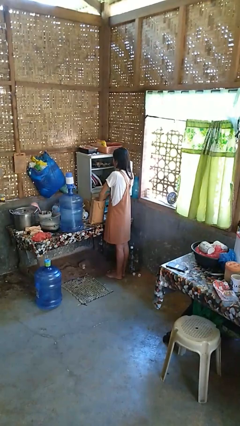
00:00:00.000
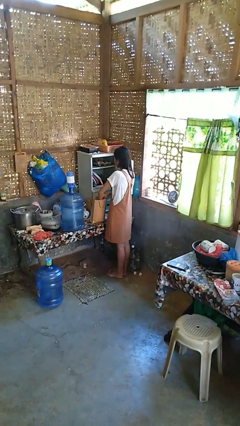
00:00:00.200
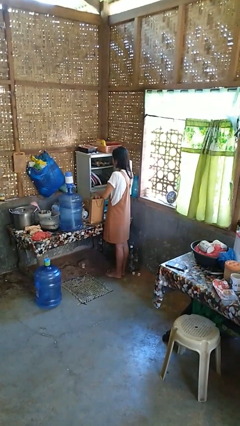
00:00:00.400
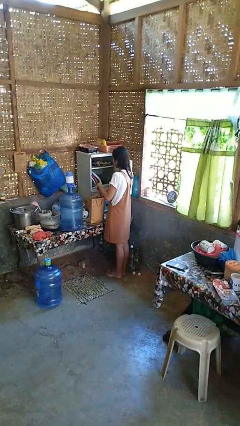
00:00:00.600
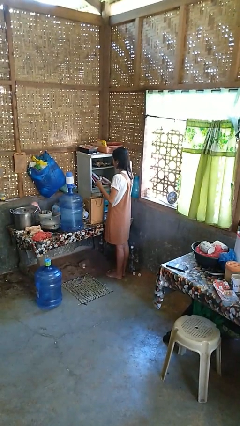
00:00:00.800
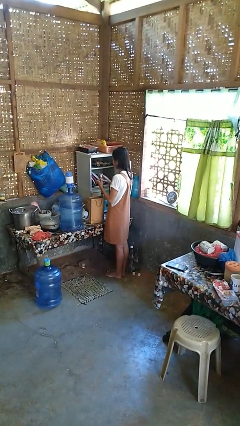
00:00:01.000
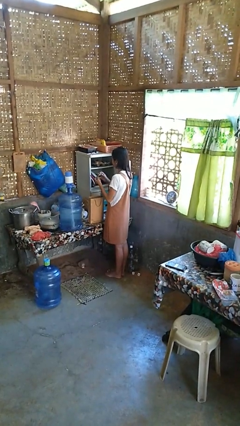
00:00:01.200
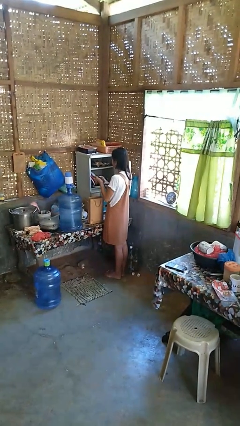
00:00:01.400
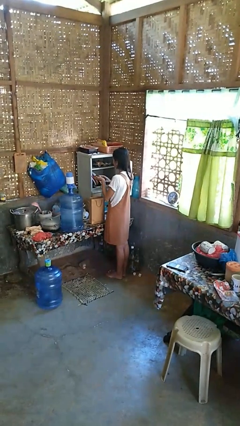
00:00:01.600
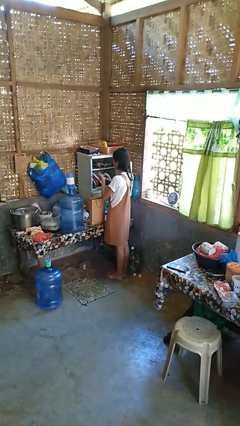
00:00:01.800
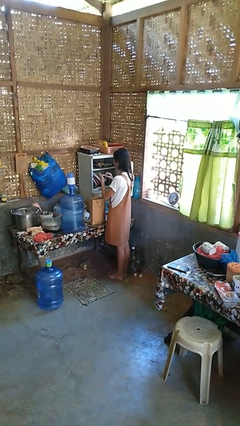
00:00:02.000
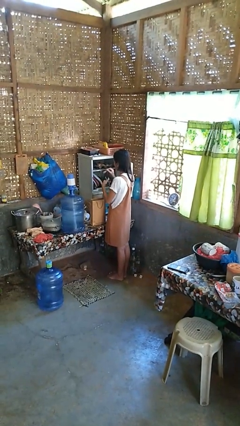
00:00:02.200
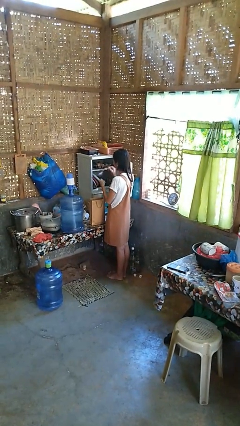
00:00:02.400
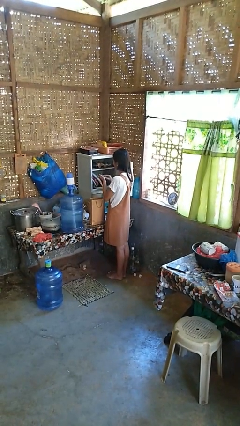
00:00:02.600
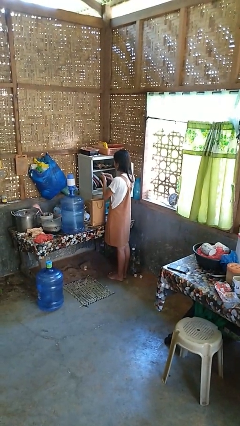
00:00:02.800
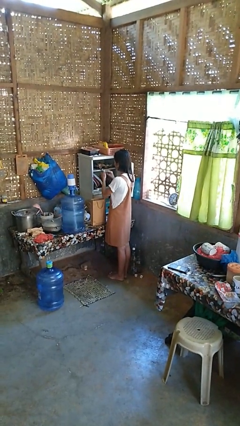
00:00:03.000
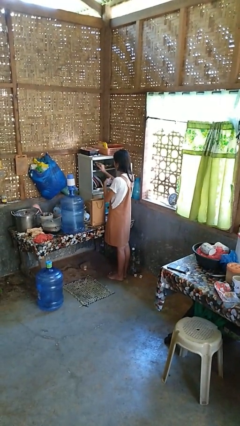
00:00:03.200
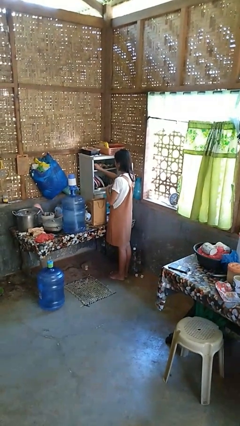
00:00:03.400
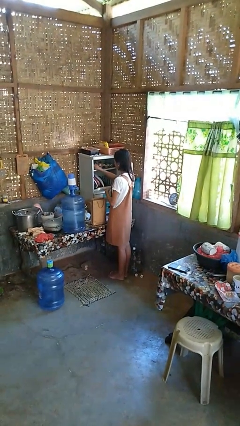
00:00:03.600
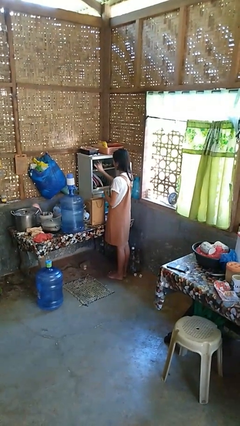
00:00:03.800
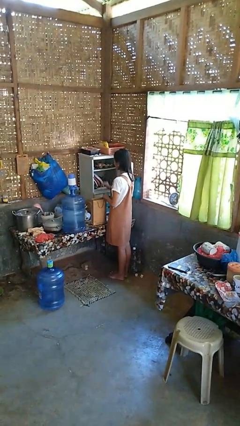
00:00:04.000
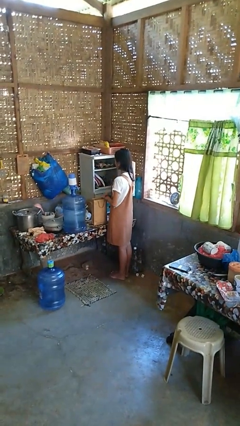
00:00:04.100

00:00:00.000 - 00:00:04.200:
person loads groceries into cabinet

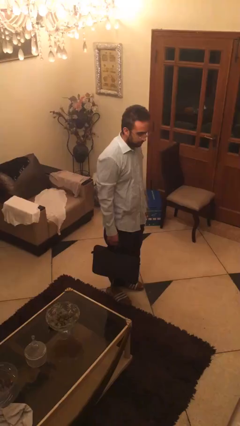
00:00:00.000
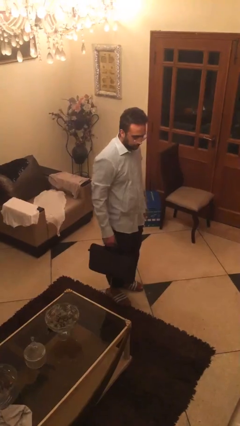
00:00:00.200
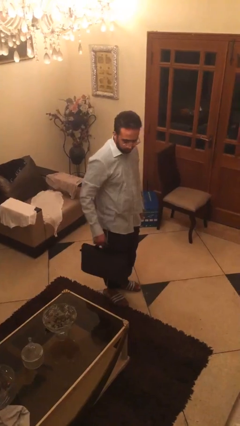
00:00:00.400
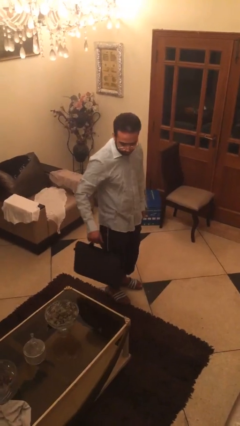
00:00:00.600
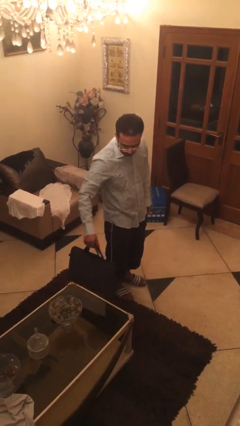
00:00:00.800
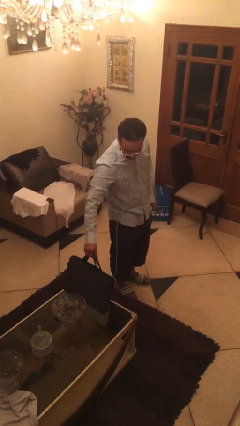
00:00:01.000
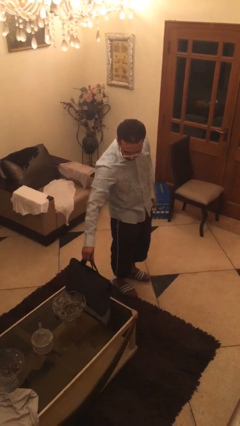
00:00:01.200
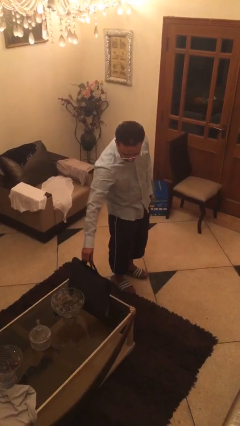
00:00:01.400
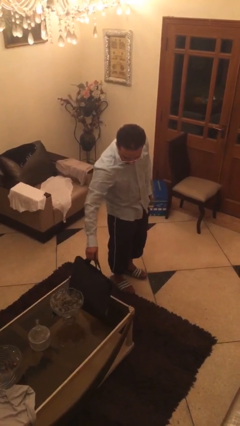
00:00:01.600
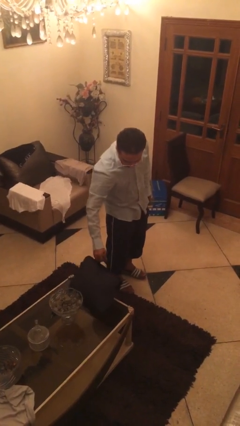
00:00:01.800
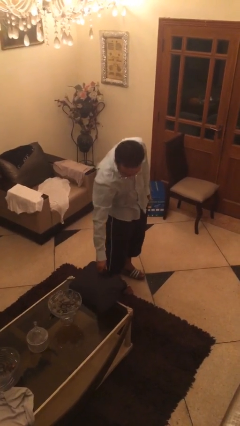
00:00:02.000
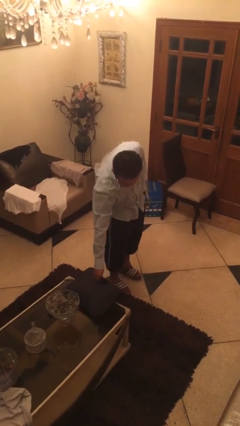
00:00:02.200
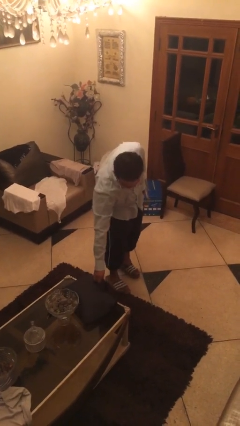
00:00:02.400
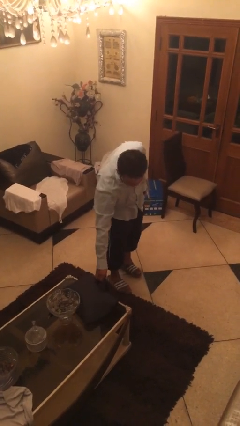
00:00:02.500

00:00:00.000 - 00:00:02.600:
person puts down object on table

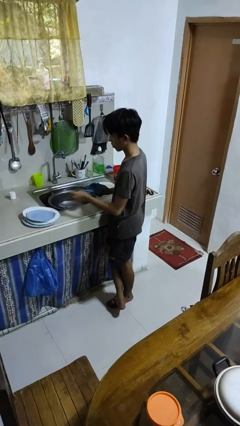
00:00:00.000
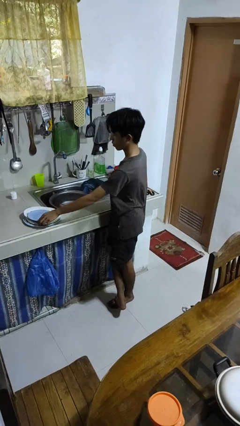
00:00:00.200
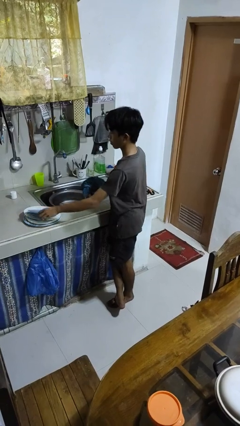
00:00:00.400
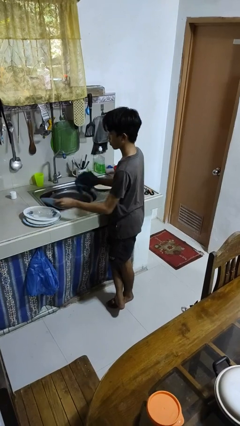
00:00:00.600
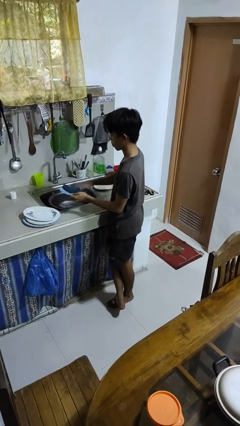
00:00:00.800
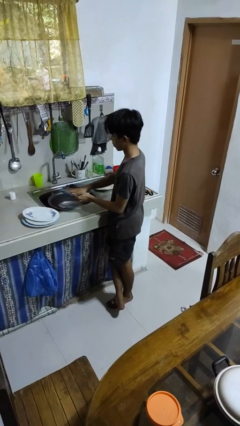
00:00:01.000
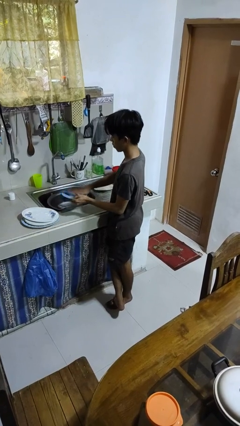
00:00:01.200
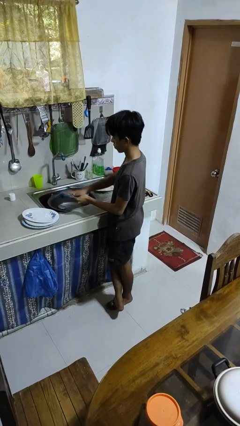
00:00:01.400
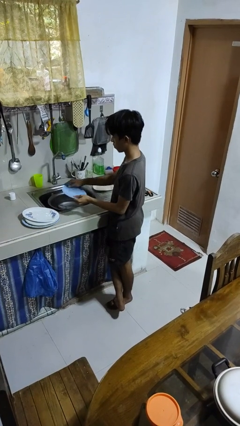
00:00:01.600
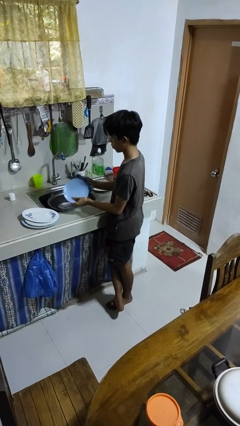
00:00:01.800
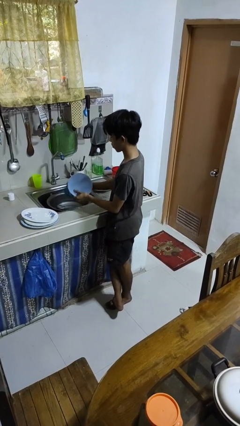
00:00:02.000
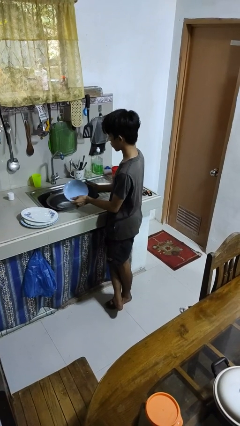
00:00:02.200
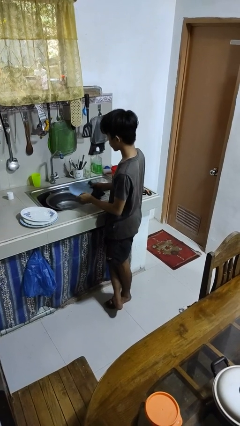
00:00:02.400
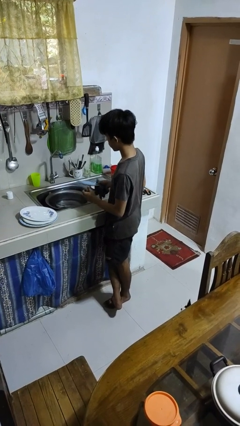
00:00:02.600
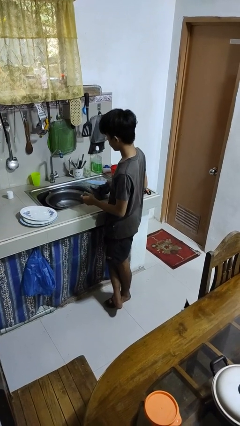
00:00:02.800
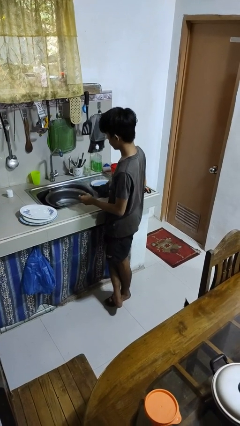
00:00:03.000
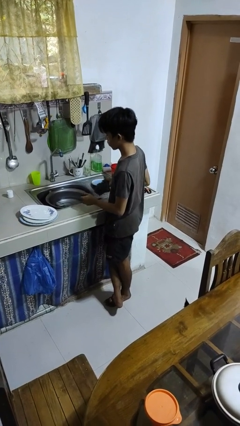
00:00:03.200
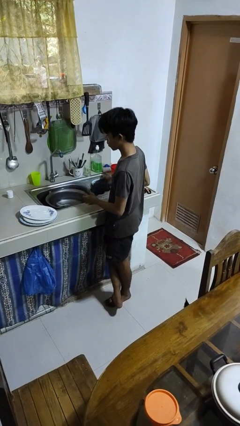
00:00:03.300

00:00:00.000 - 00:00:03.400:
person dries dish

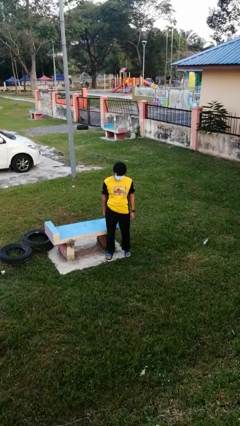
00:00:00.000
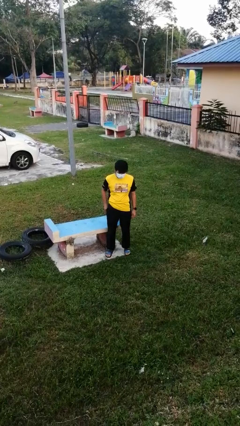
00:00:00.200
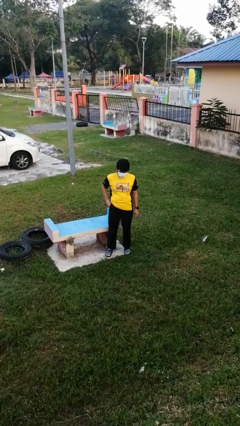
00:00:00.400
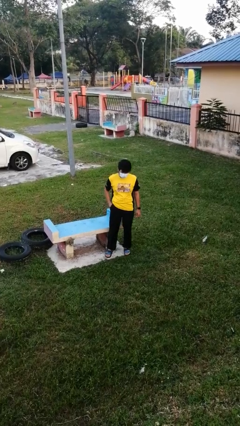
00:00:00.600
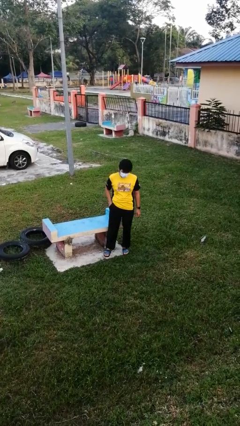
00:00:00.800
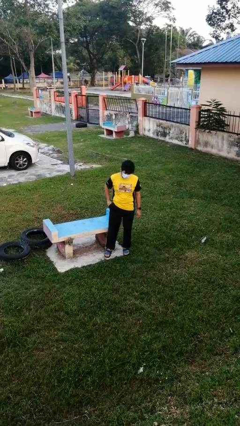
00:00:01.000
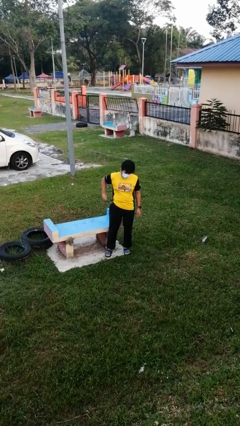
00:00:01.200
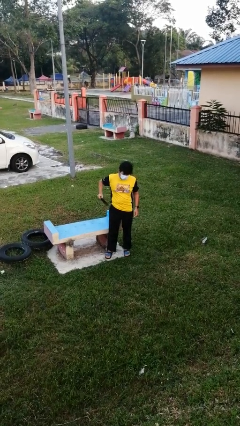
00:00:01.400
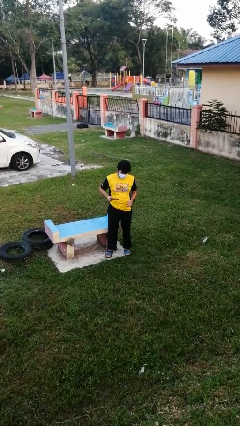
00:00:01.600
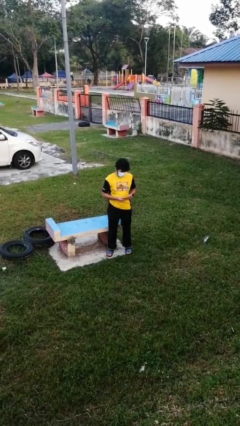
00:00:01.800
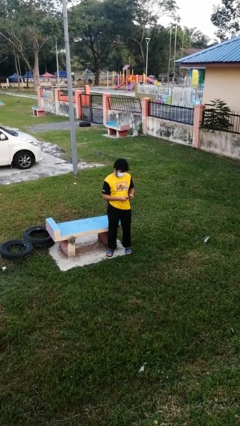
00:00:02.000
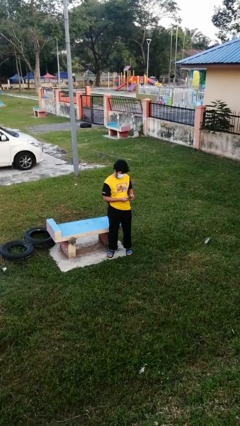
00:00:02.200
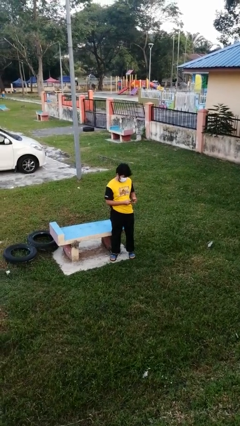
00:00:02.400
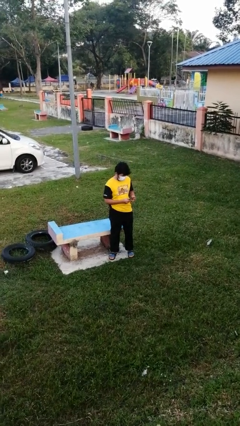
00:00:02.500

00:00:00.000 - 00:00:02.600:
person takes phone from pocket

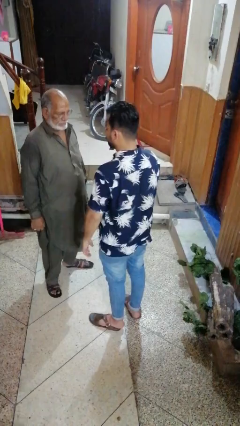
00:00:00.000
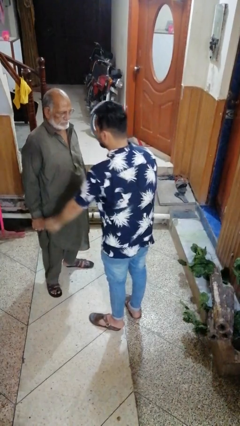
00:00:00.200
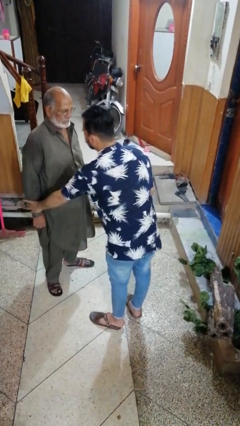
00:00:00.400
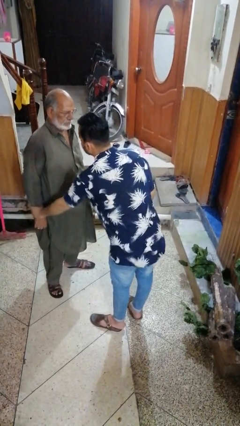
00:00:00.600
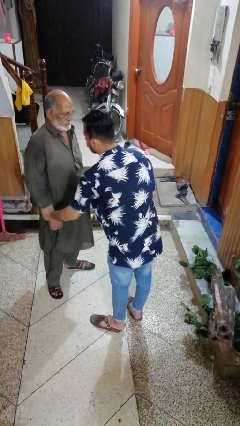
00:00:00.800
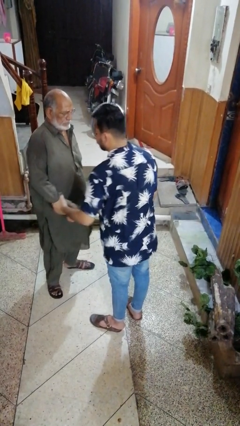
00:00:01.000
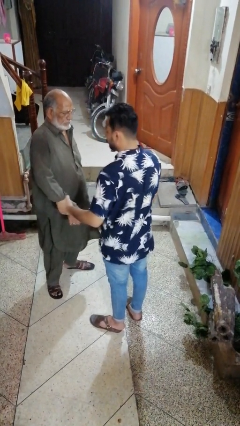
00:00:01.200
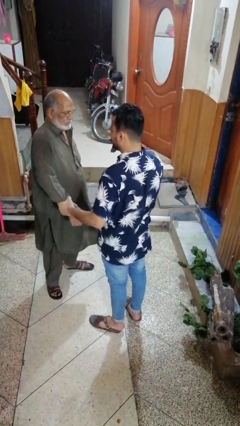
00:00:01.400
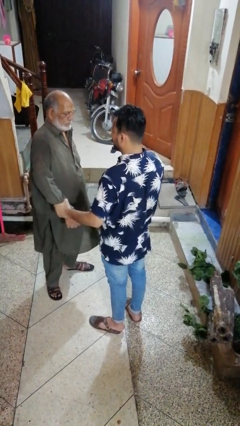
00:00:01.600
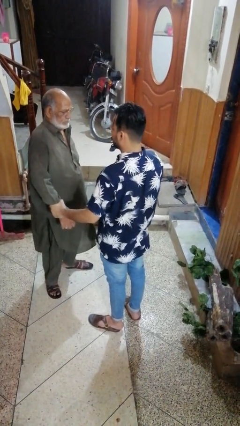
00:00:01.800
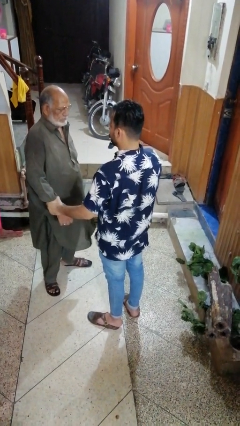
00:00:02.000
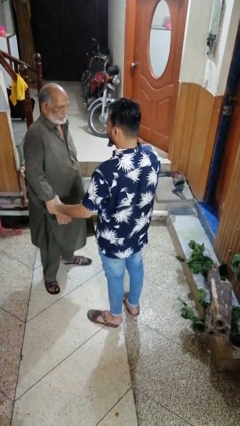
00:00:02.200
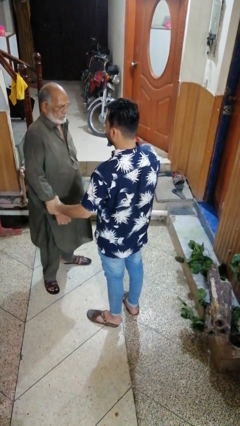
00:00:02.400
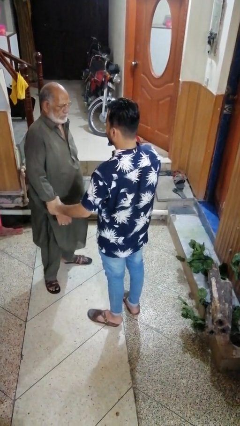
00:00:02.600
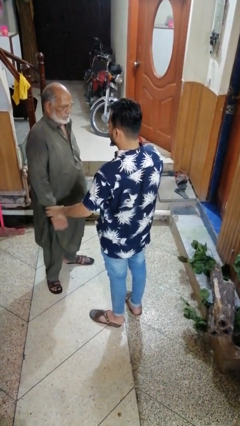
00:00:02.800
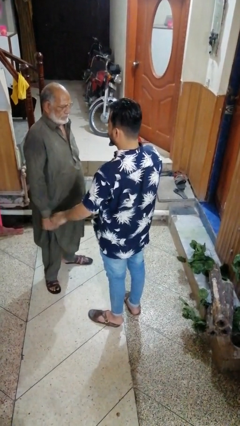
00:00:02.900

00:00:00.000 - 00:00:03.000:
person grabs person by forearm

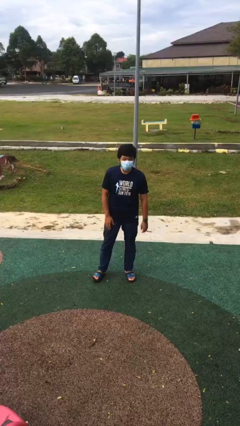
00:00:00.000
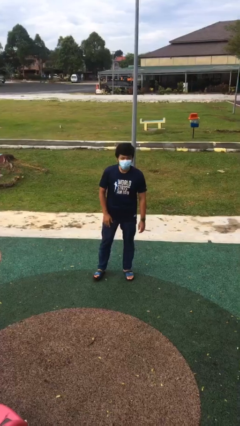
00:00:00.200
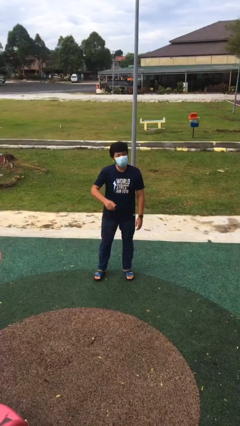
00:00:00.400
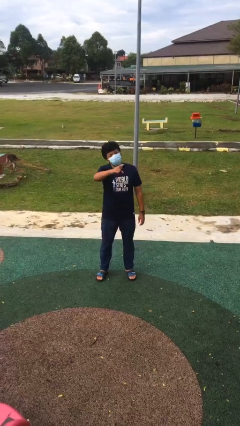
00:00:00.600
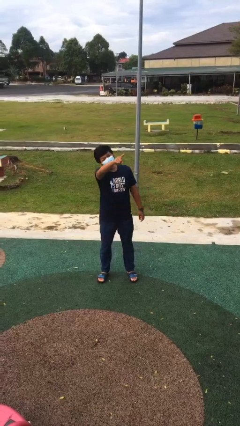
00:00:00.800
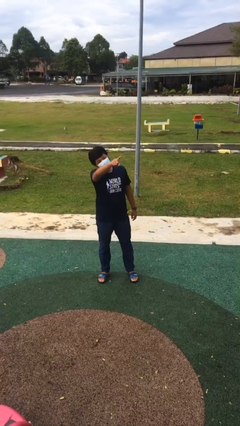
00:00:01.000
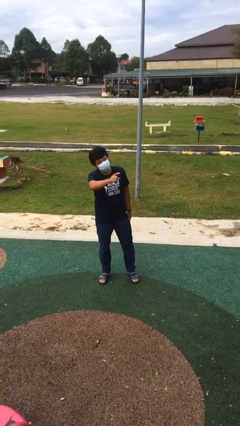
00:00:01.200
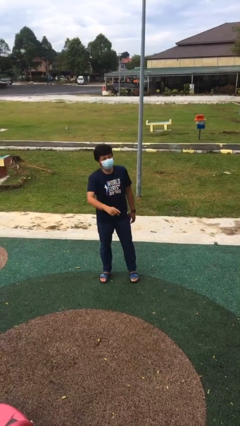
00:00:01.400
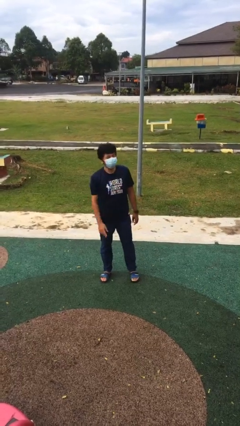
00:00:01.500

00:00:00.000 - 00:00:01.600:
person points at person
